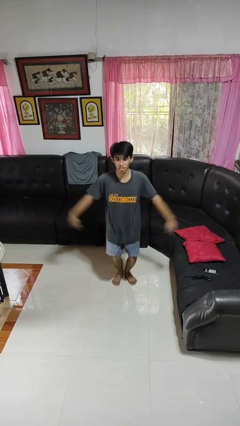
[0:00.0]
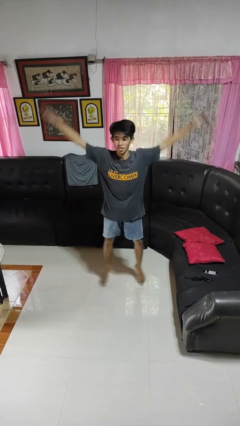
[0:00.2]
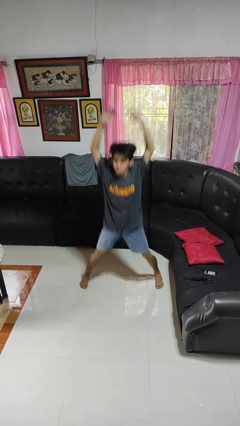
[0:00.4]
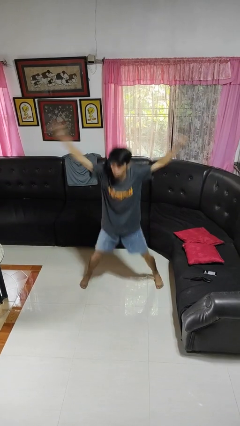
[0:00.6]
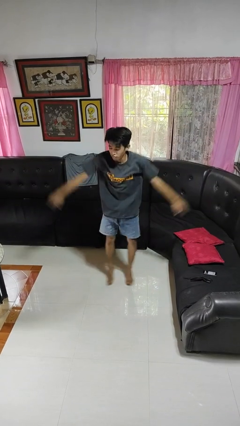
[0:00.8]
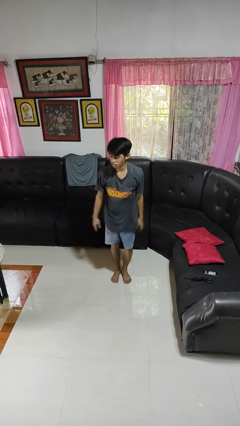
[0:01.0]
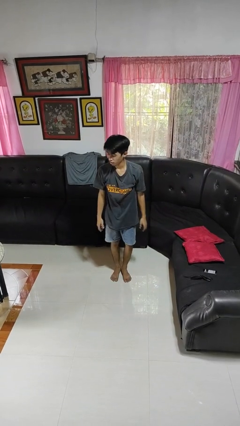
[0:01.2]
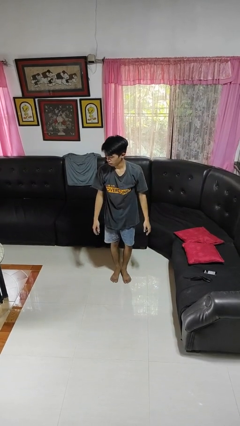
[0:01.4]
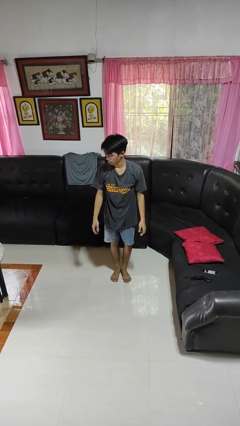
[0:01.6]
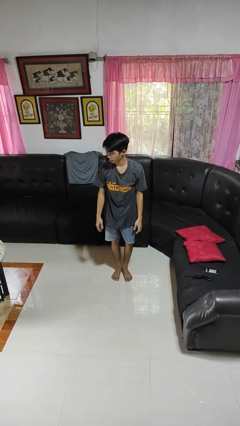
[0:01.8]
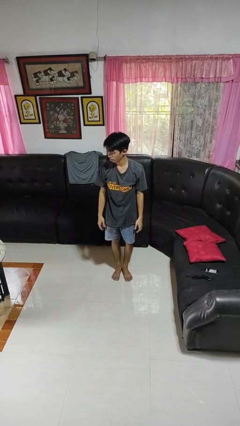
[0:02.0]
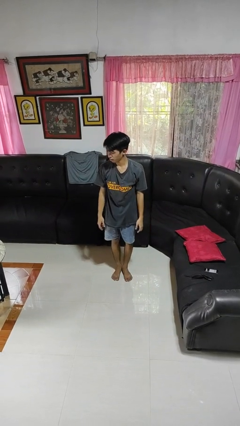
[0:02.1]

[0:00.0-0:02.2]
person exercises with jumping jacks

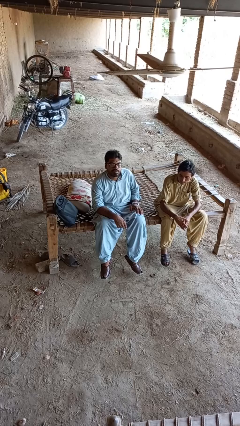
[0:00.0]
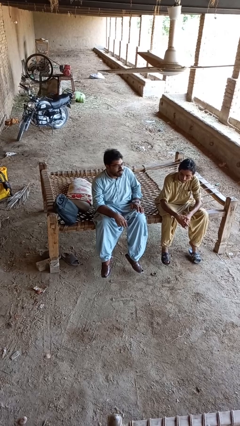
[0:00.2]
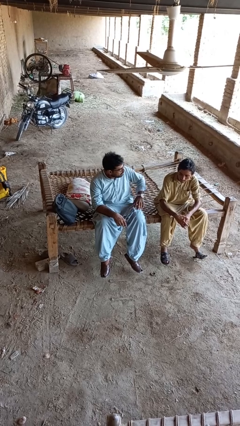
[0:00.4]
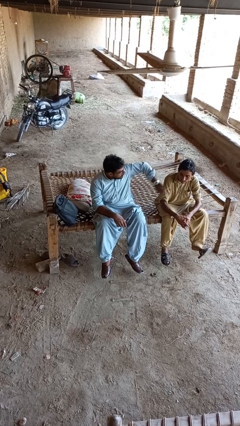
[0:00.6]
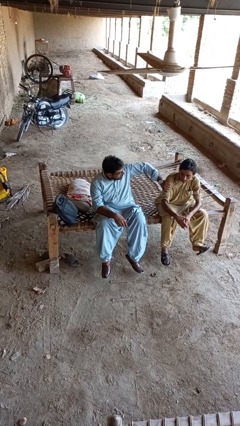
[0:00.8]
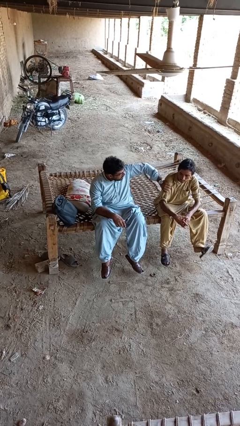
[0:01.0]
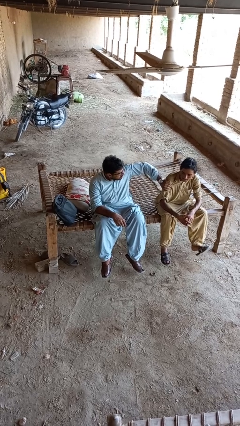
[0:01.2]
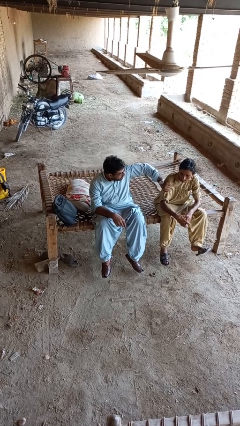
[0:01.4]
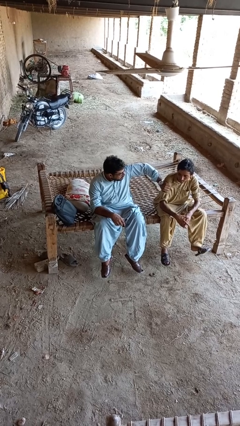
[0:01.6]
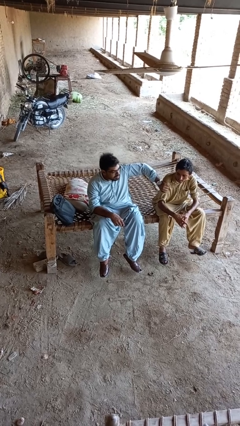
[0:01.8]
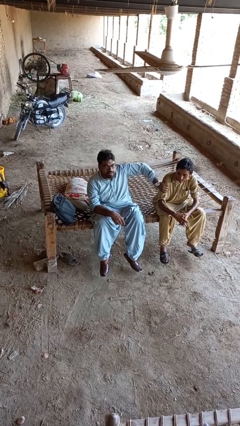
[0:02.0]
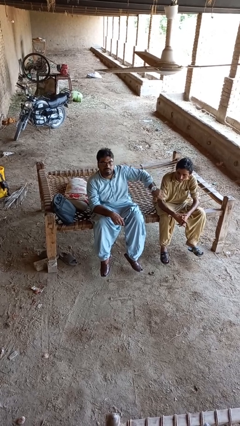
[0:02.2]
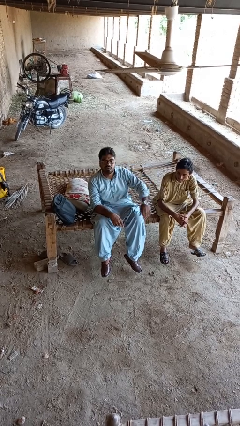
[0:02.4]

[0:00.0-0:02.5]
person grabs person by bicep

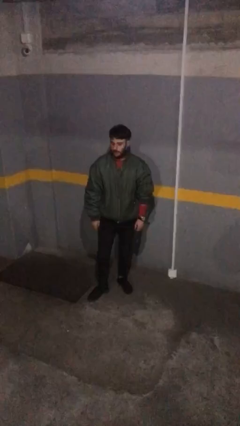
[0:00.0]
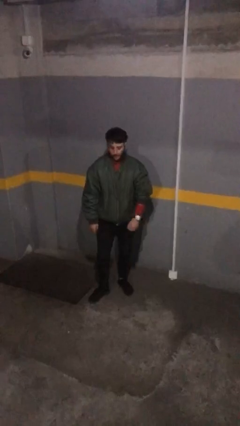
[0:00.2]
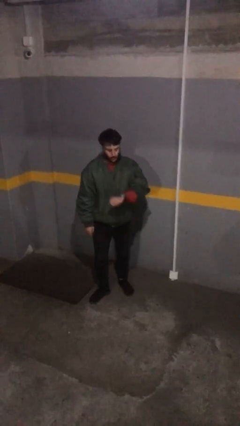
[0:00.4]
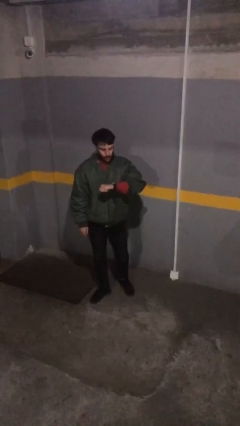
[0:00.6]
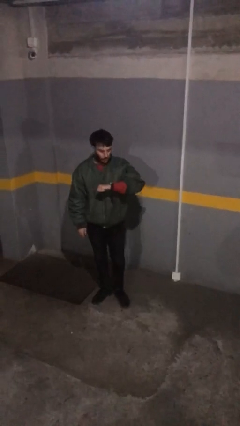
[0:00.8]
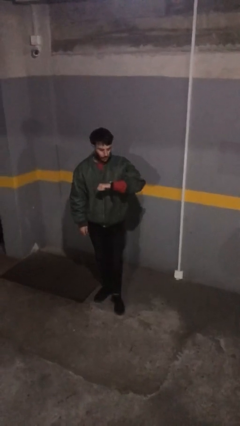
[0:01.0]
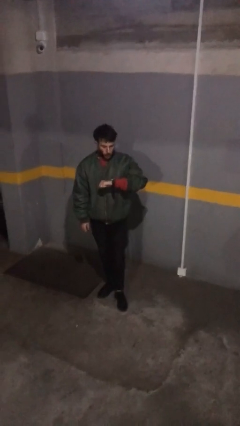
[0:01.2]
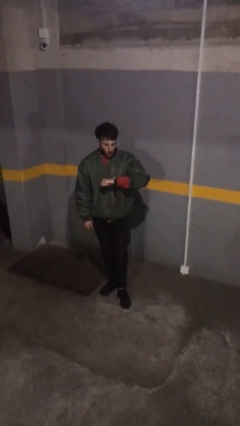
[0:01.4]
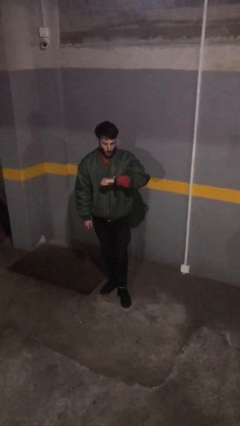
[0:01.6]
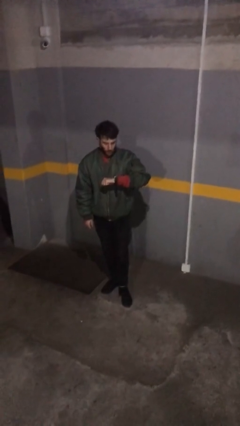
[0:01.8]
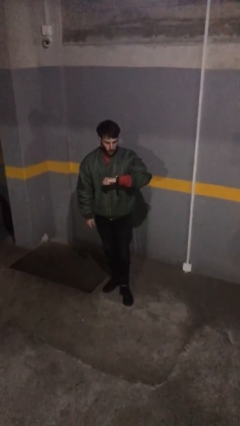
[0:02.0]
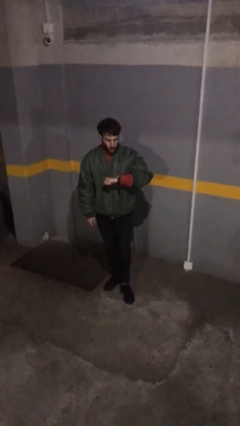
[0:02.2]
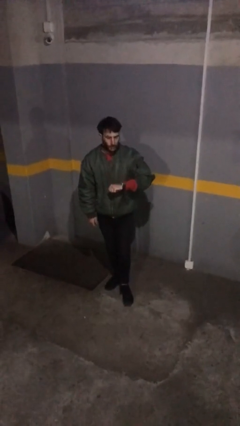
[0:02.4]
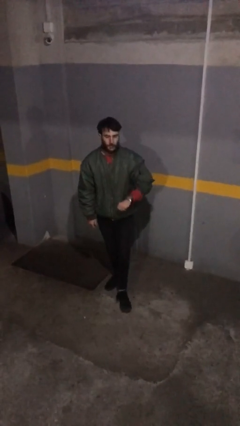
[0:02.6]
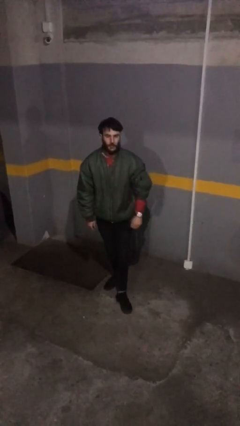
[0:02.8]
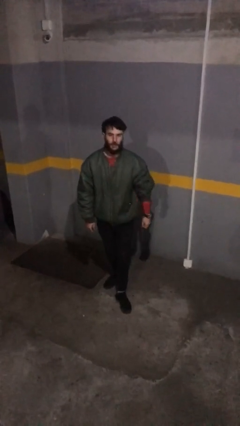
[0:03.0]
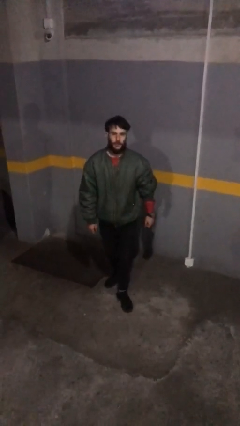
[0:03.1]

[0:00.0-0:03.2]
person looks at wristwatch

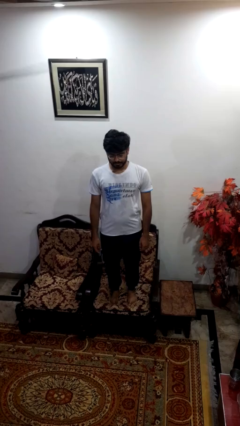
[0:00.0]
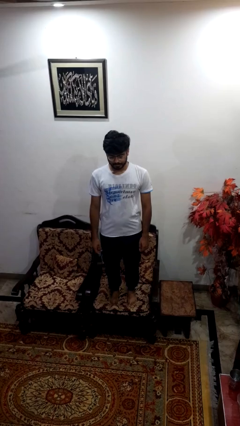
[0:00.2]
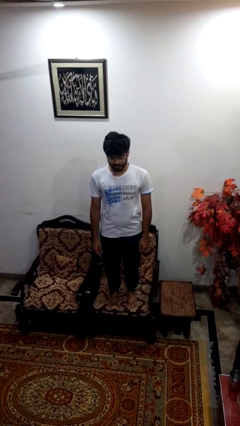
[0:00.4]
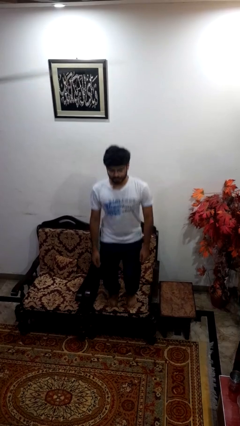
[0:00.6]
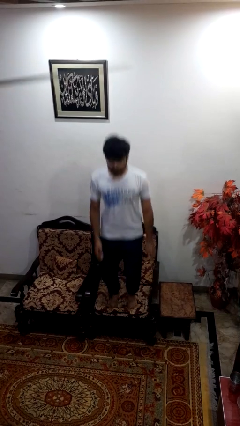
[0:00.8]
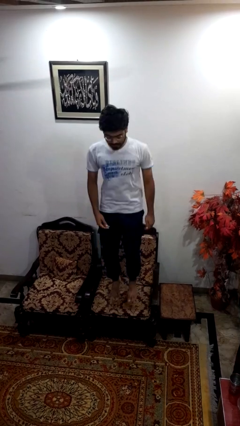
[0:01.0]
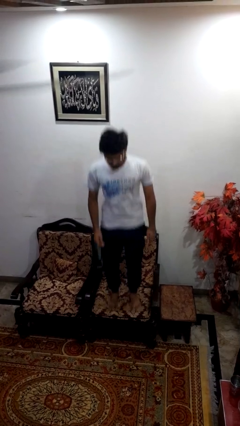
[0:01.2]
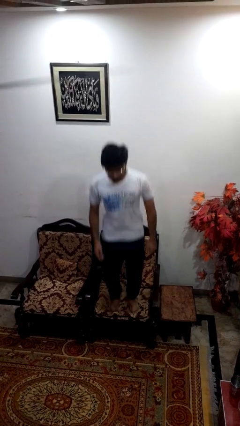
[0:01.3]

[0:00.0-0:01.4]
person jumps on couch

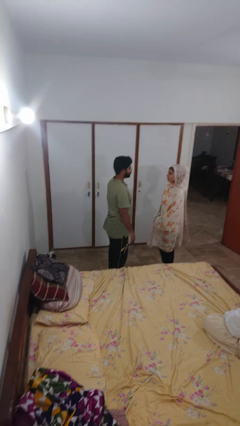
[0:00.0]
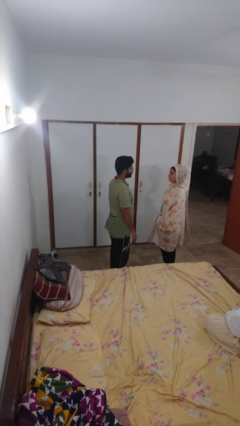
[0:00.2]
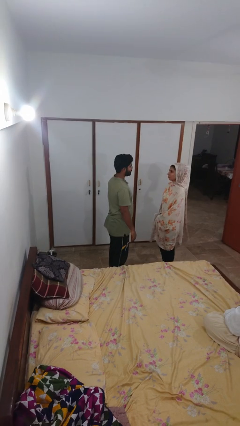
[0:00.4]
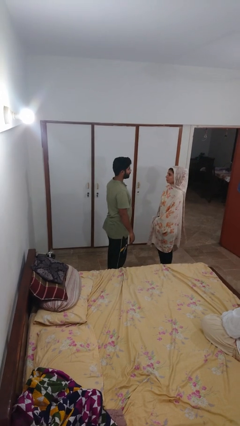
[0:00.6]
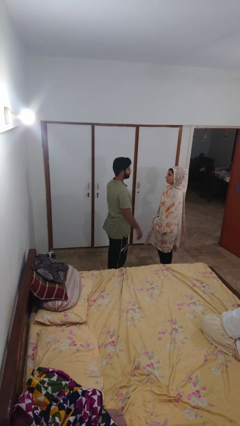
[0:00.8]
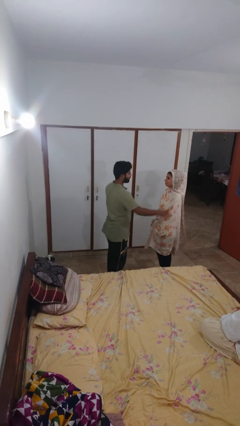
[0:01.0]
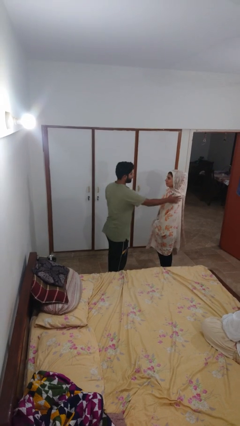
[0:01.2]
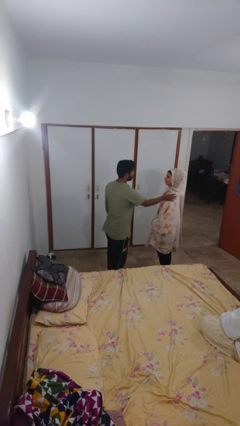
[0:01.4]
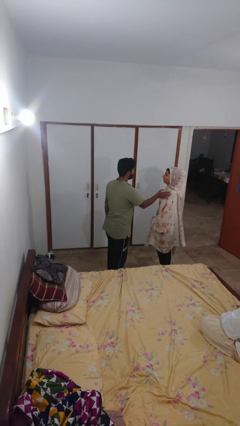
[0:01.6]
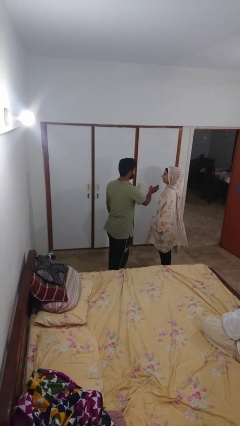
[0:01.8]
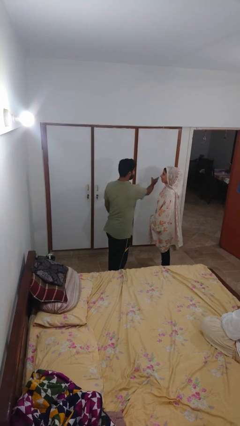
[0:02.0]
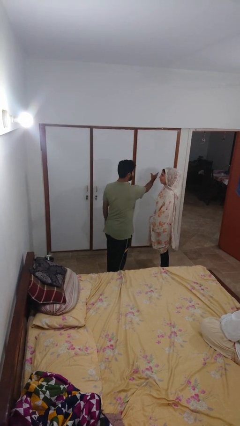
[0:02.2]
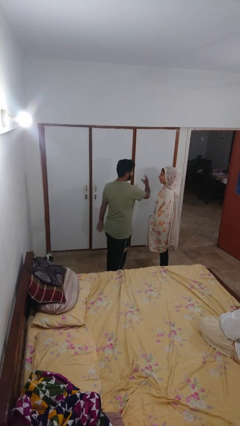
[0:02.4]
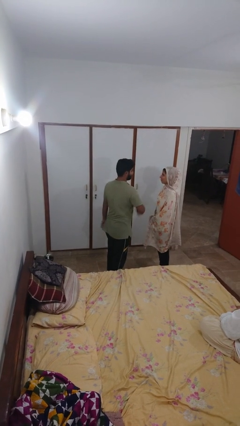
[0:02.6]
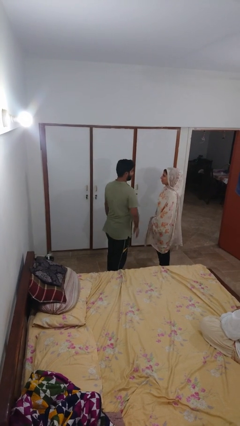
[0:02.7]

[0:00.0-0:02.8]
person shoves person

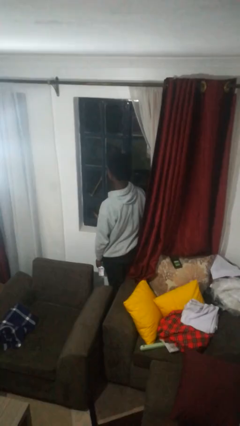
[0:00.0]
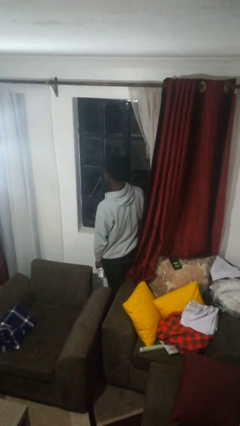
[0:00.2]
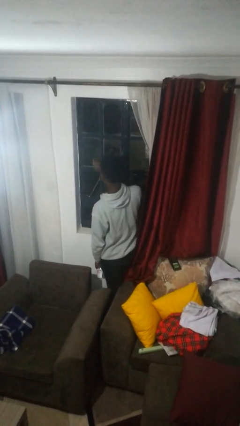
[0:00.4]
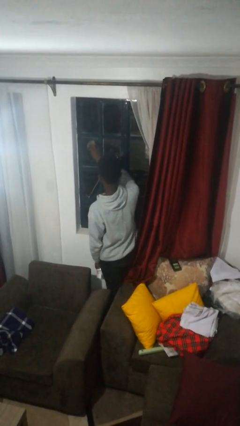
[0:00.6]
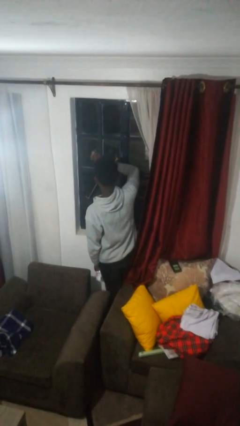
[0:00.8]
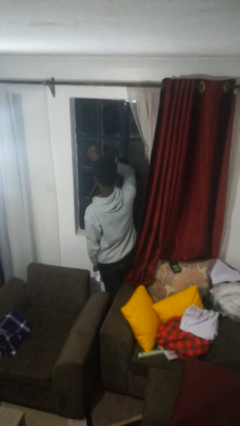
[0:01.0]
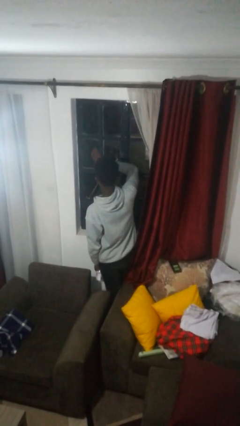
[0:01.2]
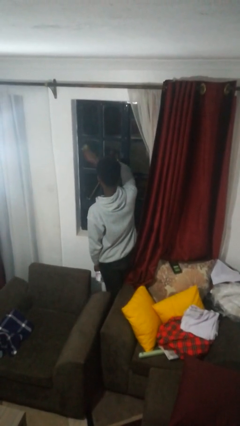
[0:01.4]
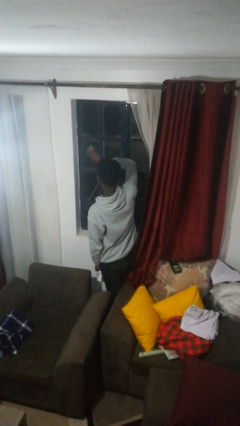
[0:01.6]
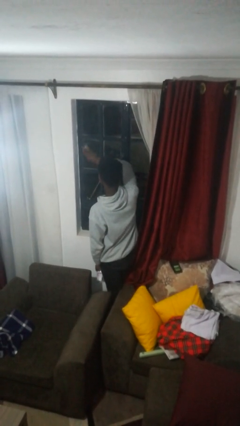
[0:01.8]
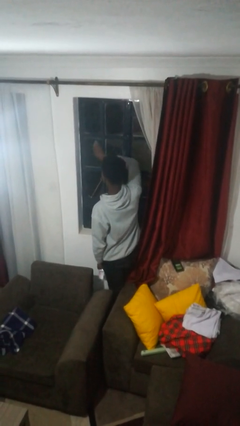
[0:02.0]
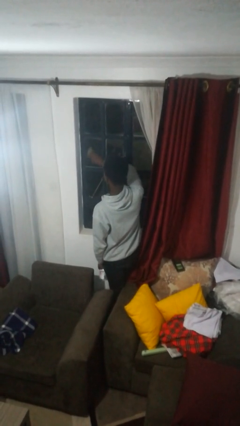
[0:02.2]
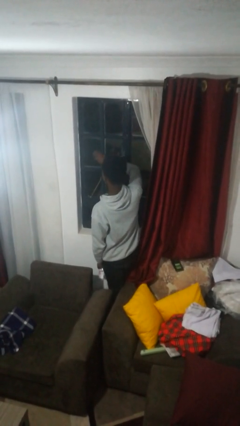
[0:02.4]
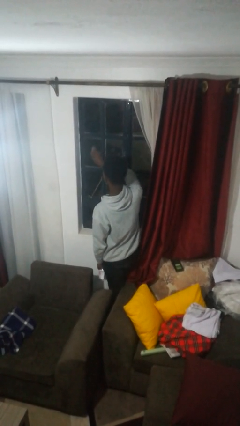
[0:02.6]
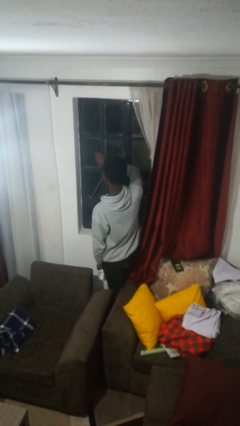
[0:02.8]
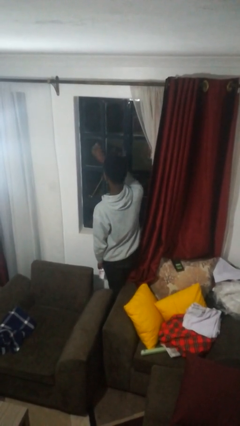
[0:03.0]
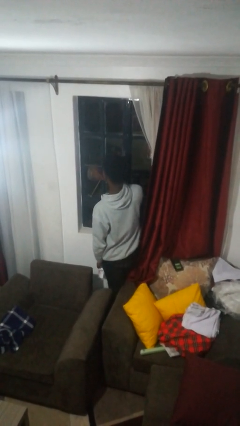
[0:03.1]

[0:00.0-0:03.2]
person washes window

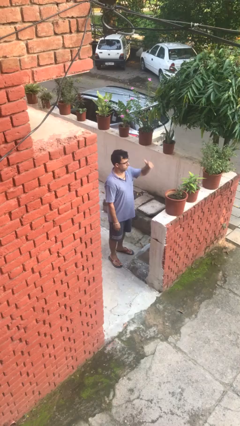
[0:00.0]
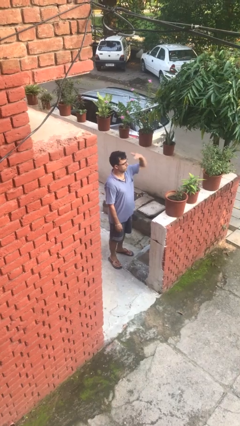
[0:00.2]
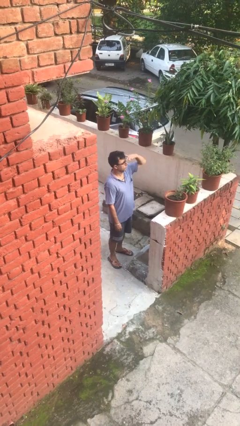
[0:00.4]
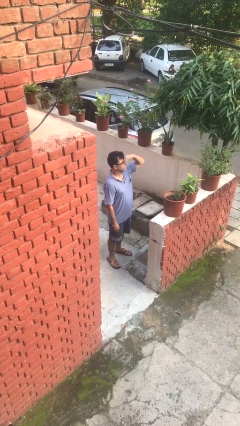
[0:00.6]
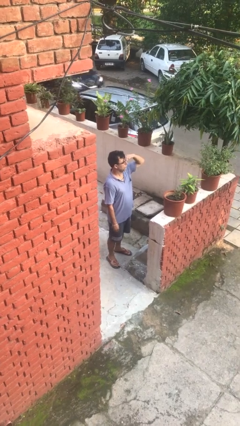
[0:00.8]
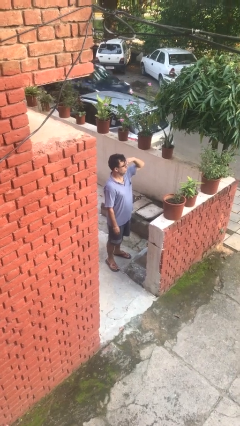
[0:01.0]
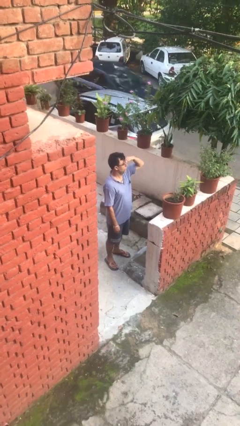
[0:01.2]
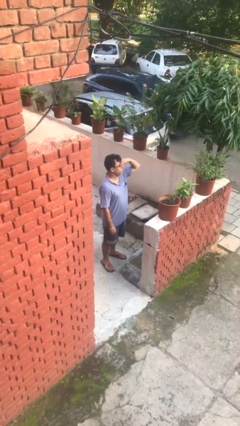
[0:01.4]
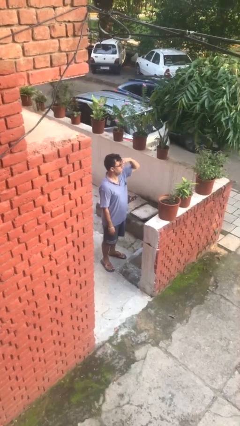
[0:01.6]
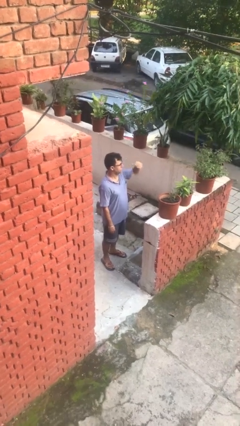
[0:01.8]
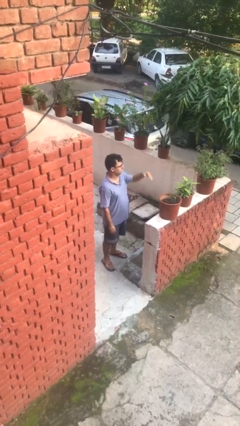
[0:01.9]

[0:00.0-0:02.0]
person shades eyes
